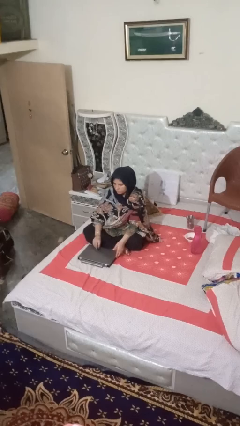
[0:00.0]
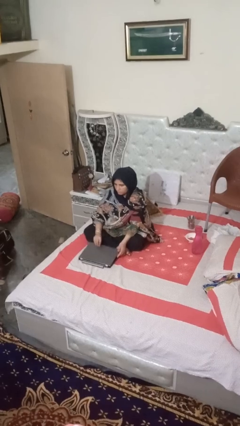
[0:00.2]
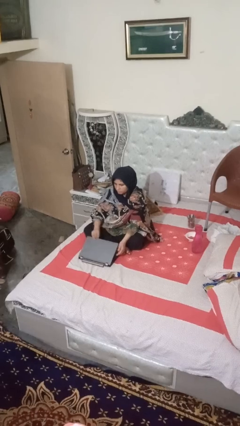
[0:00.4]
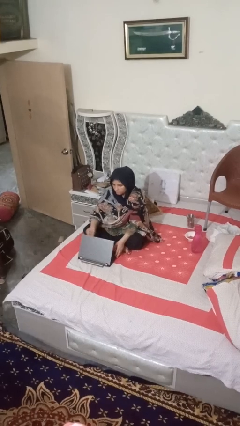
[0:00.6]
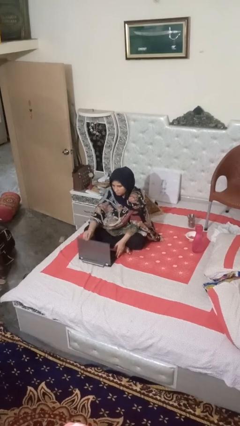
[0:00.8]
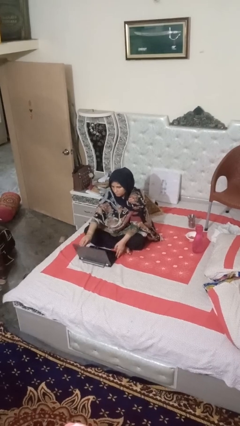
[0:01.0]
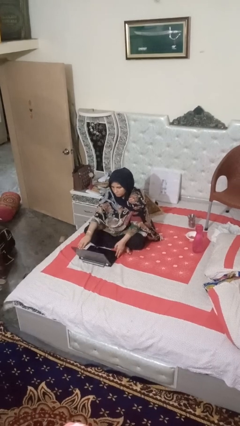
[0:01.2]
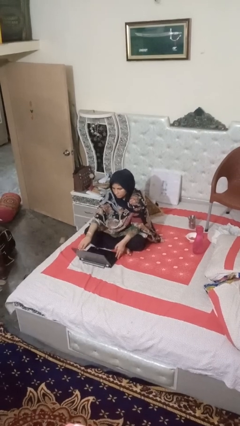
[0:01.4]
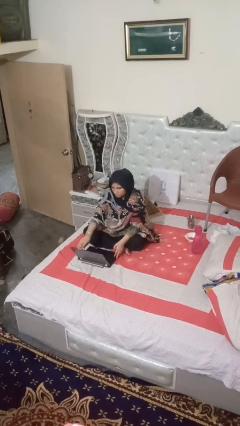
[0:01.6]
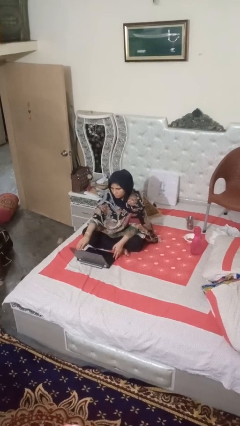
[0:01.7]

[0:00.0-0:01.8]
person opens laptop

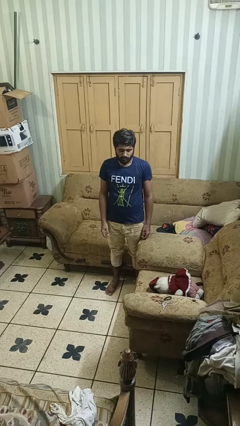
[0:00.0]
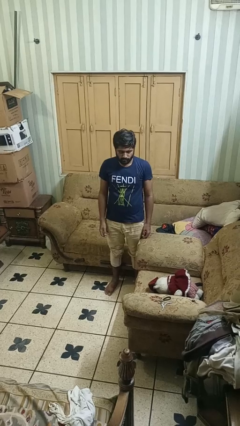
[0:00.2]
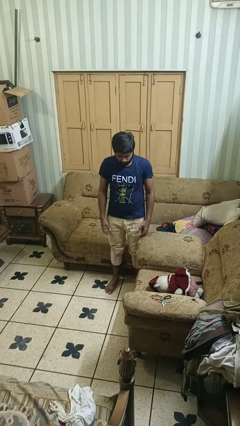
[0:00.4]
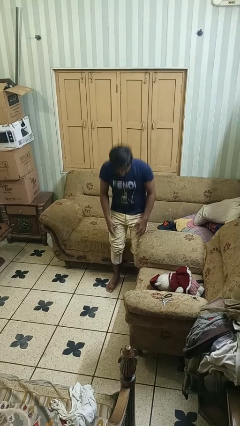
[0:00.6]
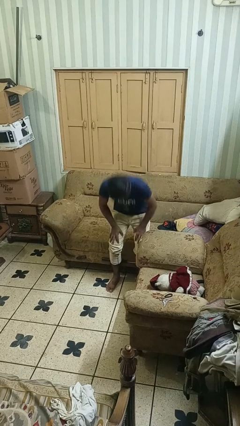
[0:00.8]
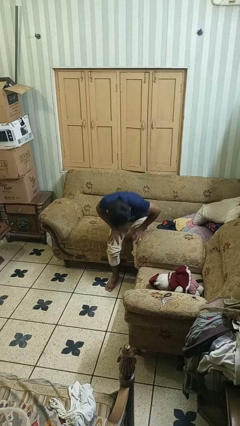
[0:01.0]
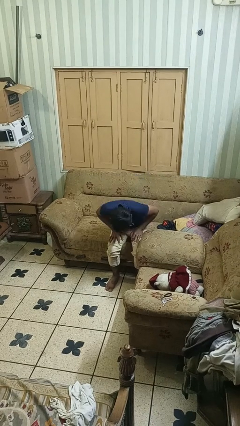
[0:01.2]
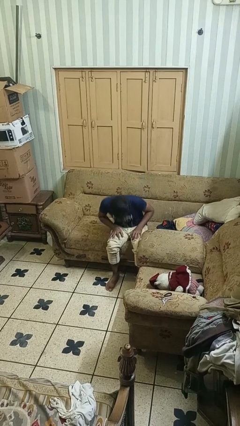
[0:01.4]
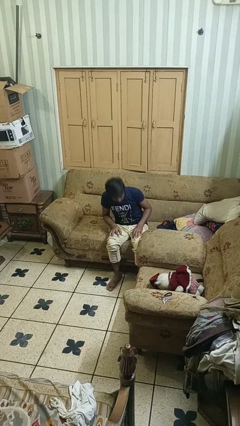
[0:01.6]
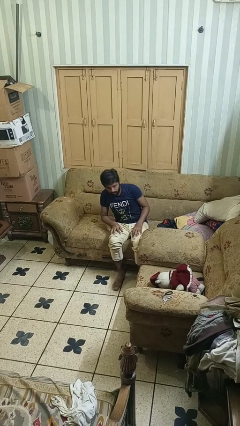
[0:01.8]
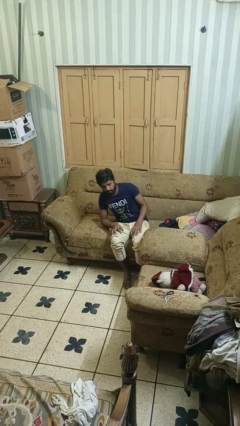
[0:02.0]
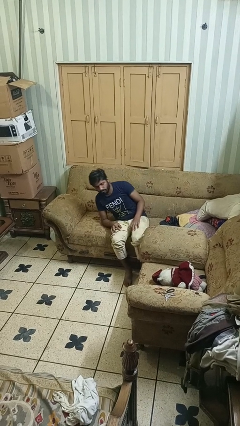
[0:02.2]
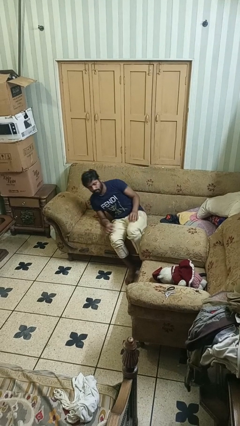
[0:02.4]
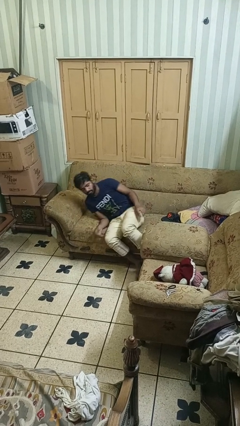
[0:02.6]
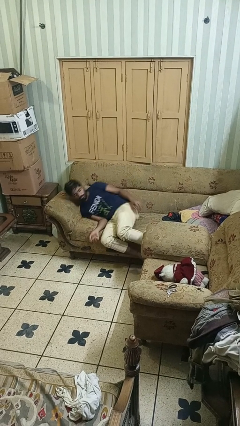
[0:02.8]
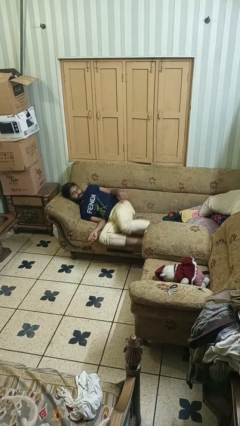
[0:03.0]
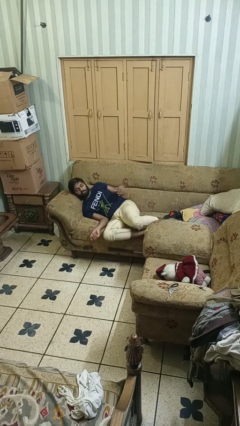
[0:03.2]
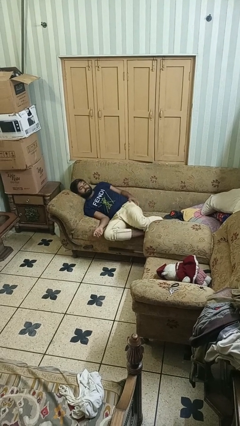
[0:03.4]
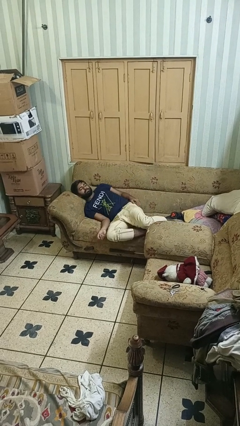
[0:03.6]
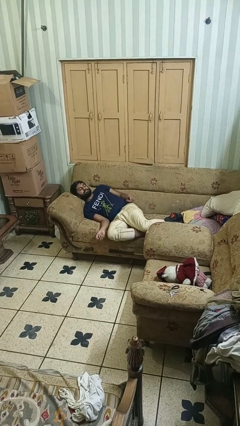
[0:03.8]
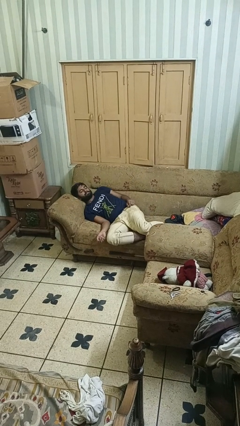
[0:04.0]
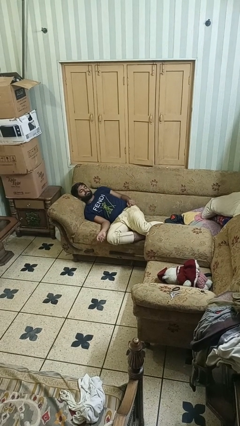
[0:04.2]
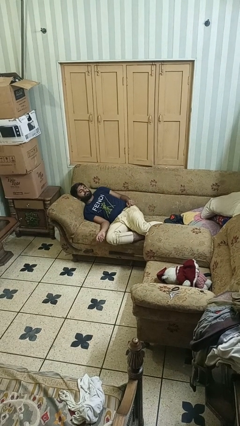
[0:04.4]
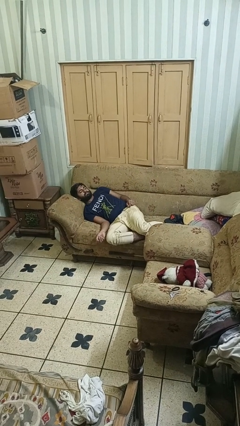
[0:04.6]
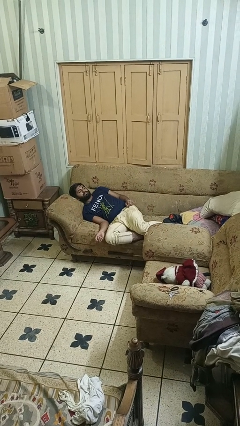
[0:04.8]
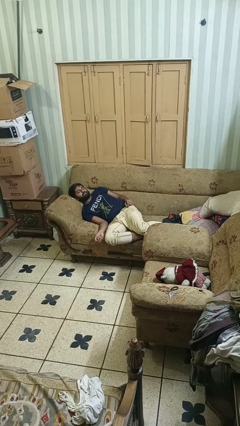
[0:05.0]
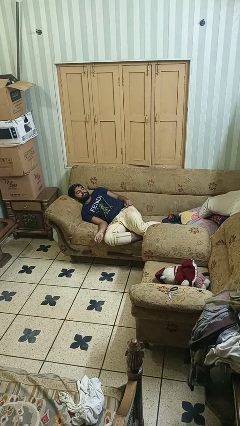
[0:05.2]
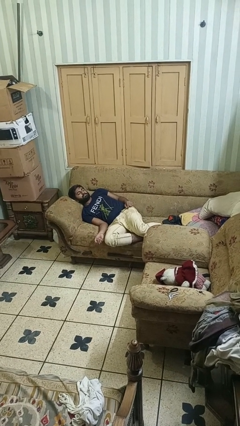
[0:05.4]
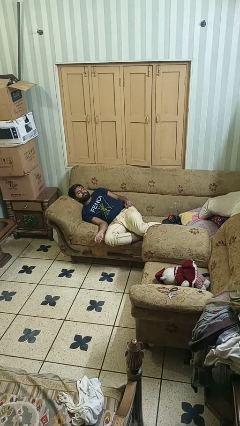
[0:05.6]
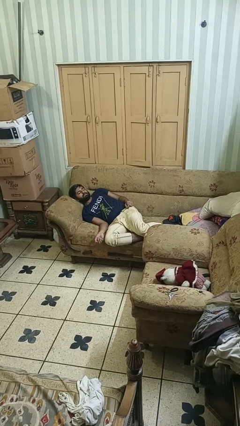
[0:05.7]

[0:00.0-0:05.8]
person lies down on couch

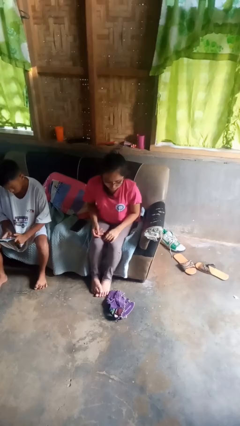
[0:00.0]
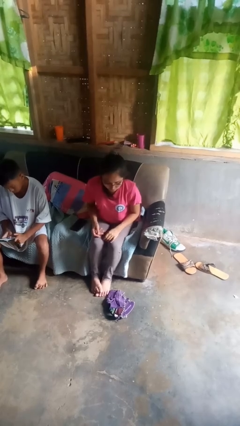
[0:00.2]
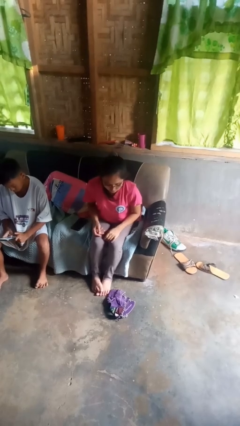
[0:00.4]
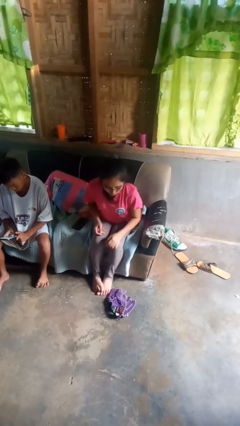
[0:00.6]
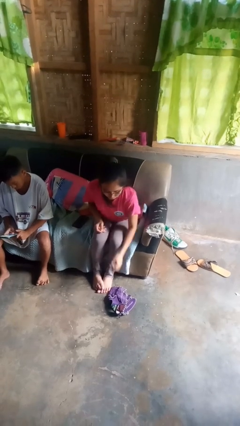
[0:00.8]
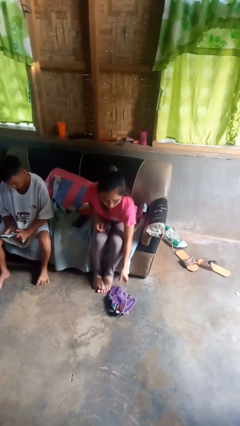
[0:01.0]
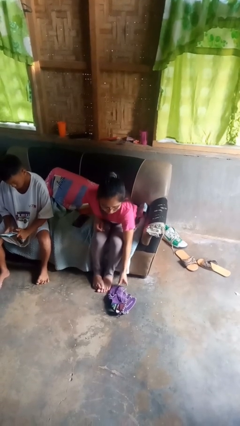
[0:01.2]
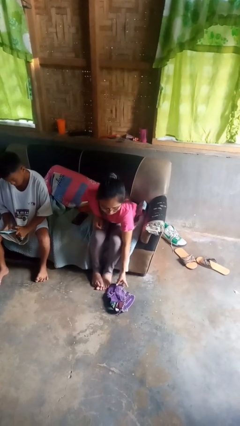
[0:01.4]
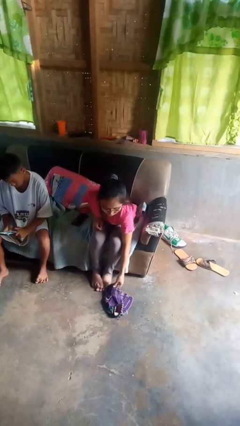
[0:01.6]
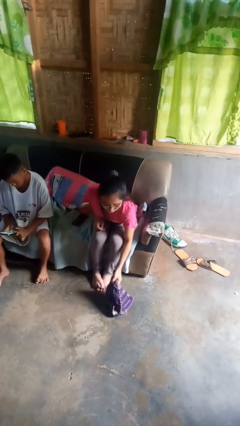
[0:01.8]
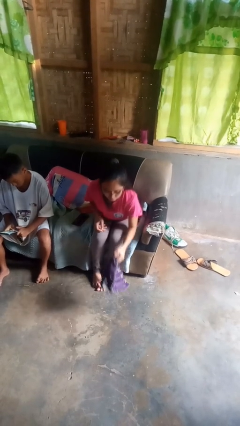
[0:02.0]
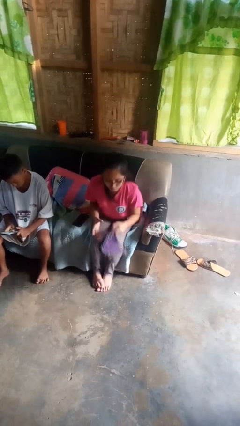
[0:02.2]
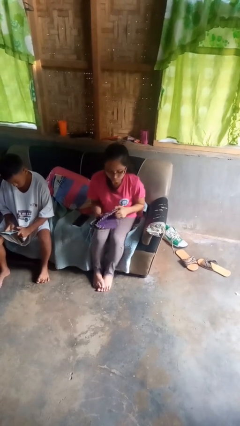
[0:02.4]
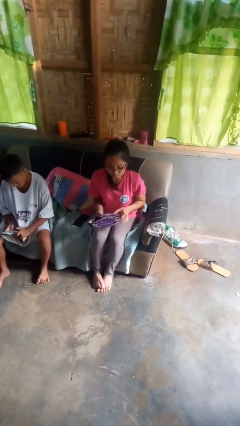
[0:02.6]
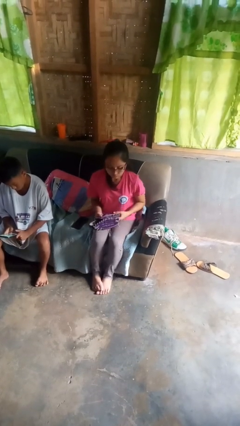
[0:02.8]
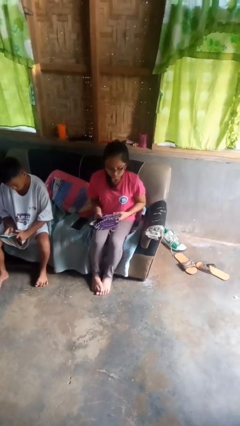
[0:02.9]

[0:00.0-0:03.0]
person picks up object from floor

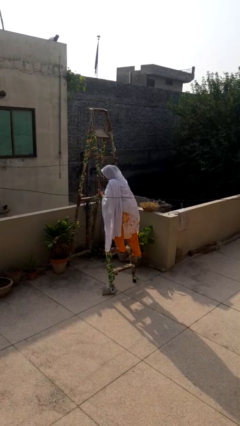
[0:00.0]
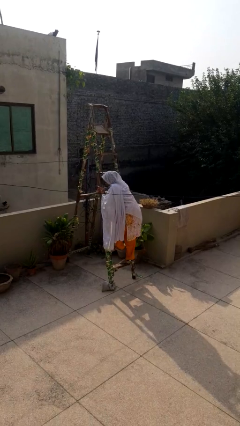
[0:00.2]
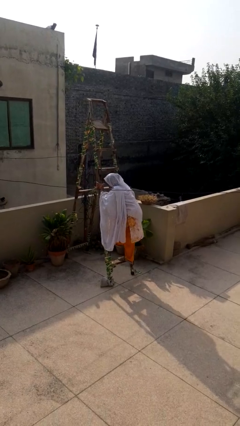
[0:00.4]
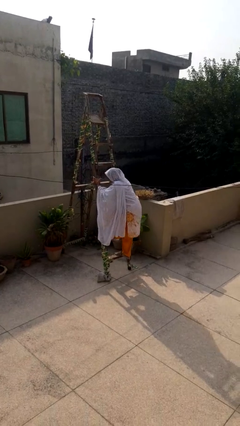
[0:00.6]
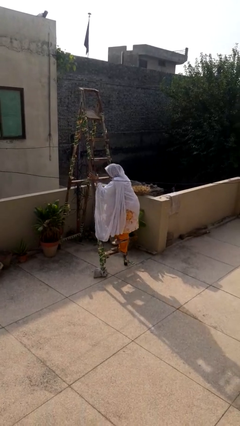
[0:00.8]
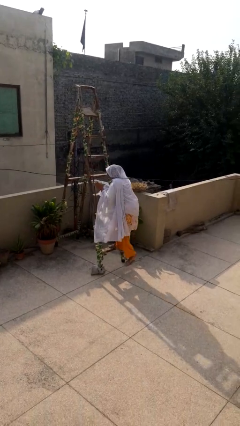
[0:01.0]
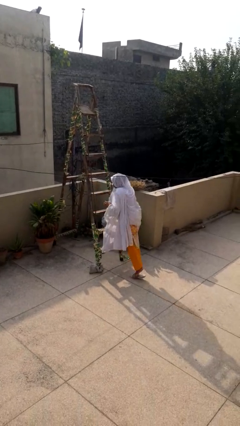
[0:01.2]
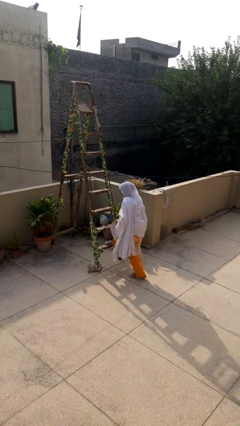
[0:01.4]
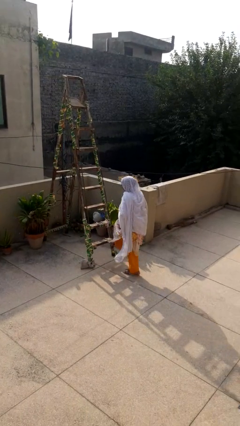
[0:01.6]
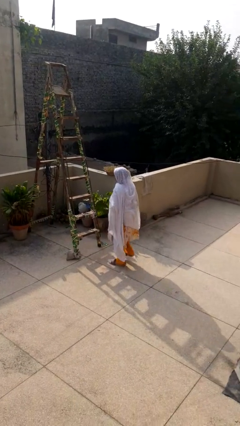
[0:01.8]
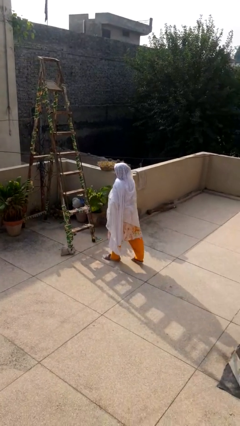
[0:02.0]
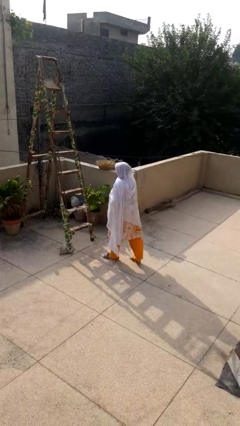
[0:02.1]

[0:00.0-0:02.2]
person climbs down ladder

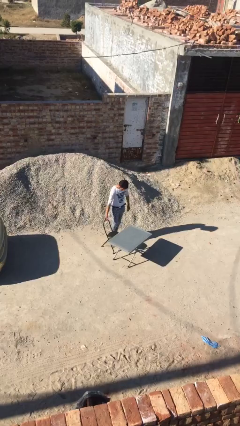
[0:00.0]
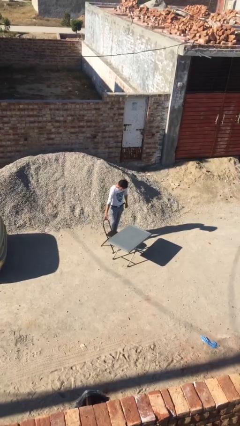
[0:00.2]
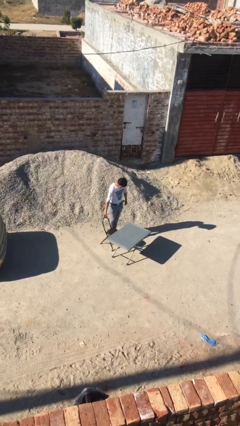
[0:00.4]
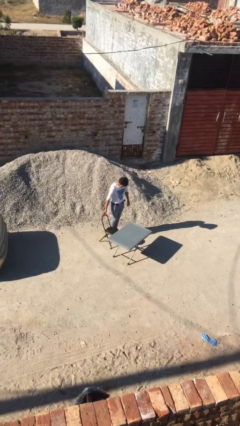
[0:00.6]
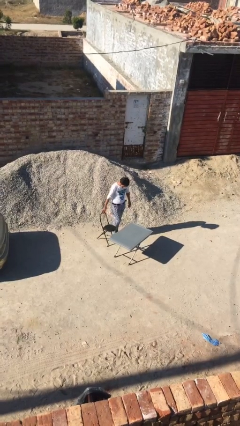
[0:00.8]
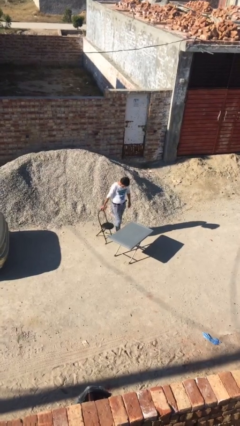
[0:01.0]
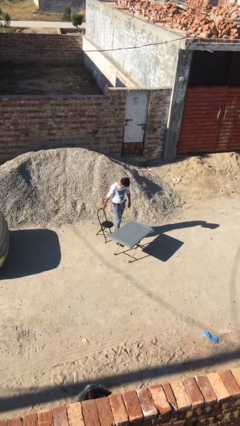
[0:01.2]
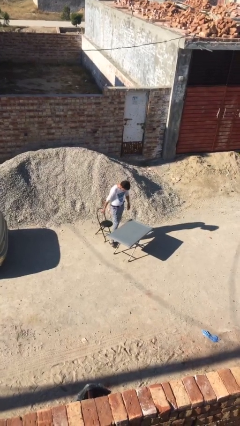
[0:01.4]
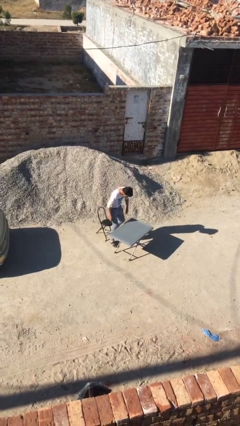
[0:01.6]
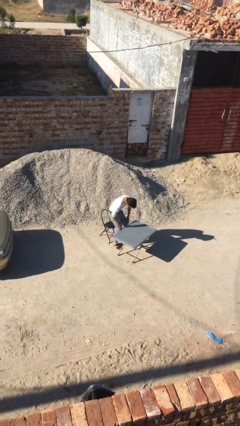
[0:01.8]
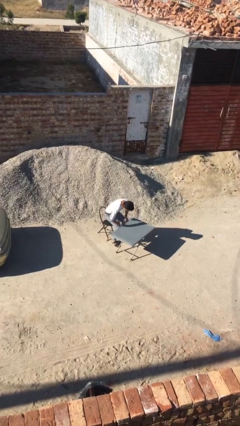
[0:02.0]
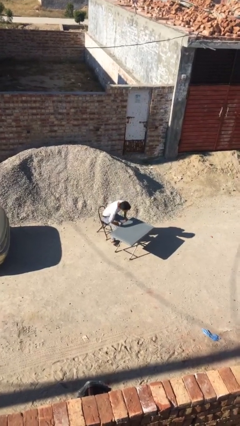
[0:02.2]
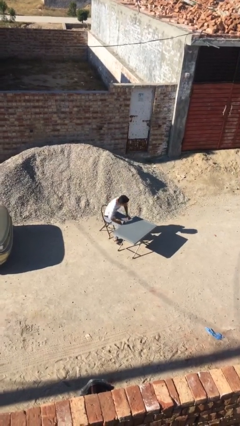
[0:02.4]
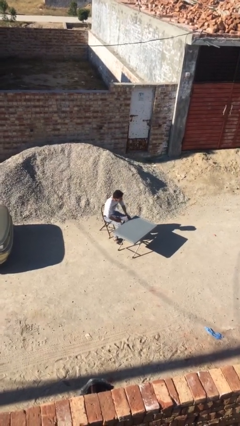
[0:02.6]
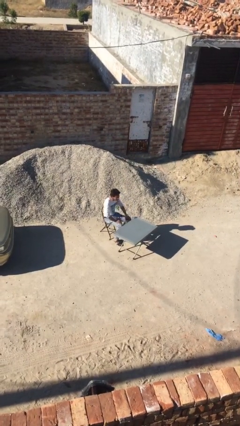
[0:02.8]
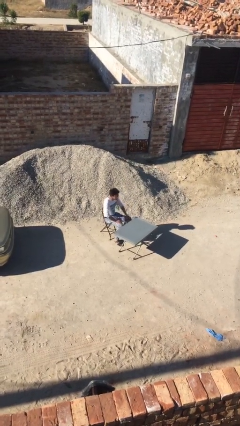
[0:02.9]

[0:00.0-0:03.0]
person sits down

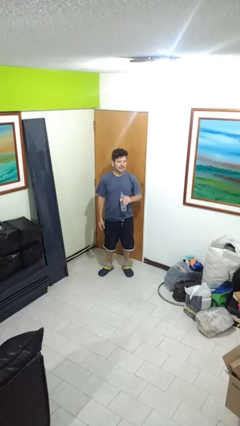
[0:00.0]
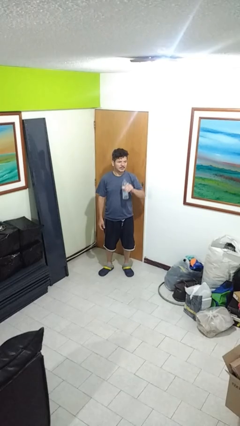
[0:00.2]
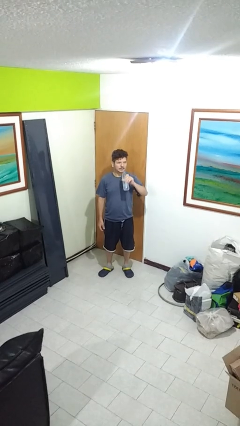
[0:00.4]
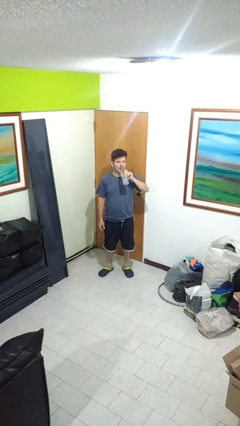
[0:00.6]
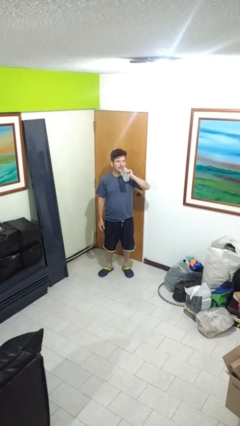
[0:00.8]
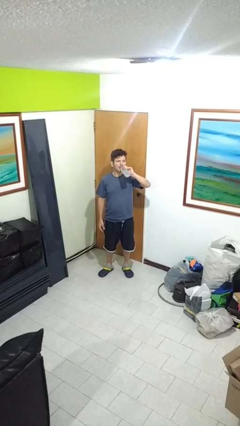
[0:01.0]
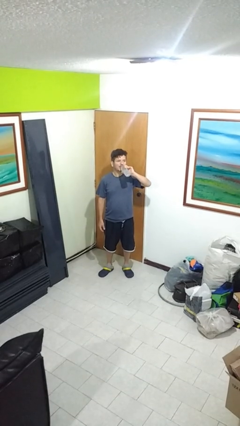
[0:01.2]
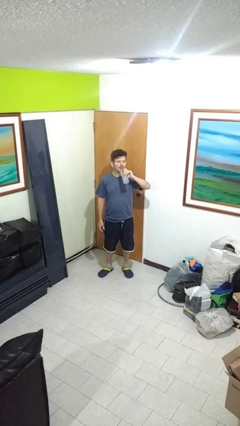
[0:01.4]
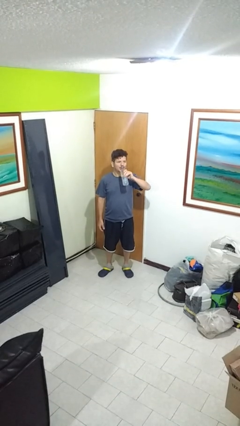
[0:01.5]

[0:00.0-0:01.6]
person drinks from bottle
